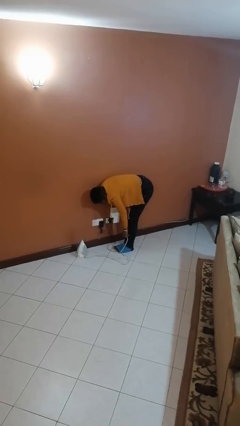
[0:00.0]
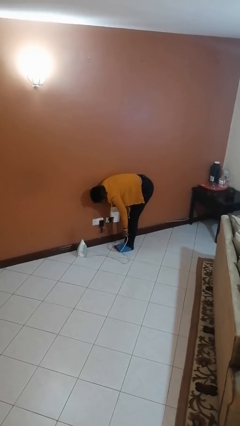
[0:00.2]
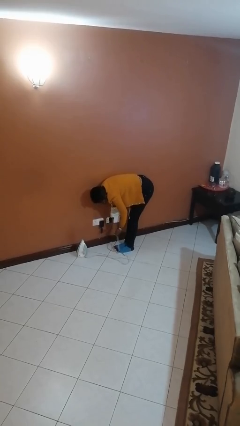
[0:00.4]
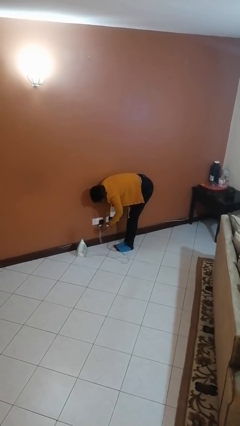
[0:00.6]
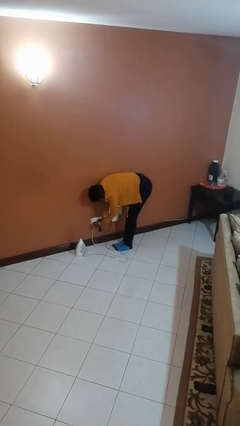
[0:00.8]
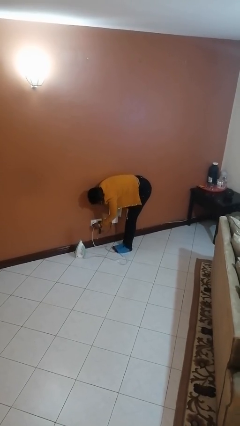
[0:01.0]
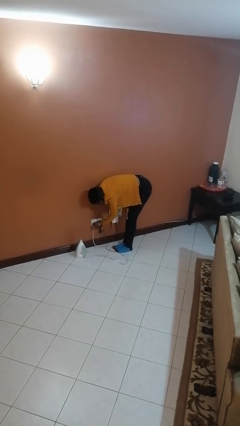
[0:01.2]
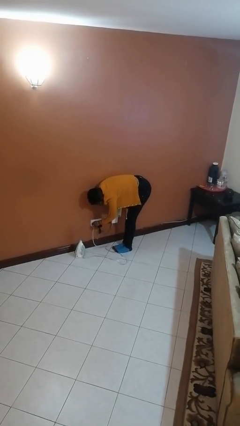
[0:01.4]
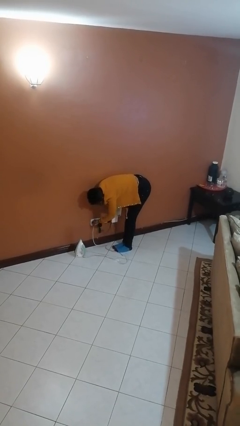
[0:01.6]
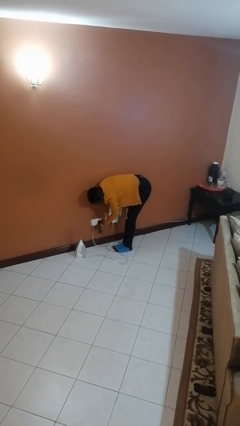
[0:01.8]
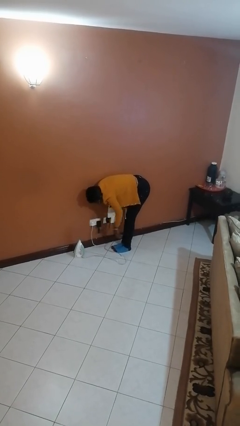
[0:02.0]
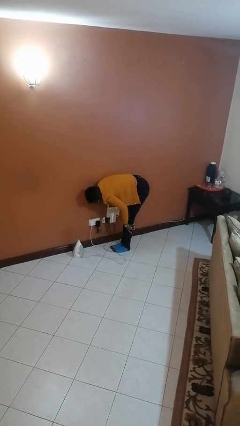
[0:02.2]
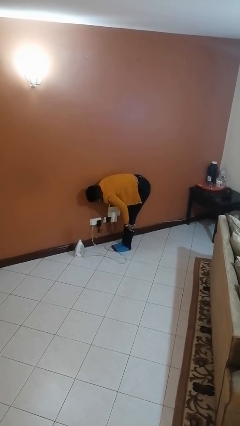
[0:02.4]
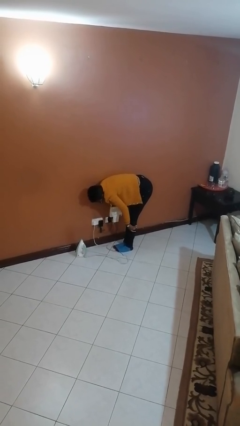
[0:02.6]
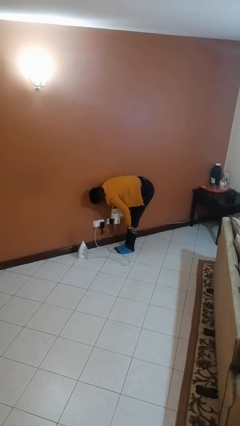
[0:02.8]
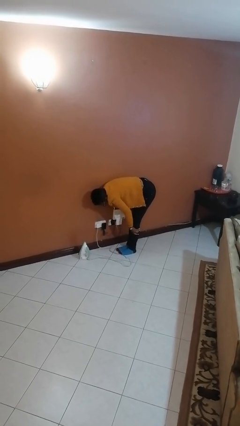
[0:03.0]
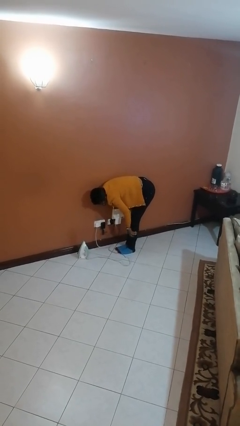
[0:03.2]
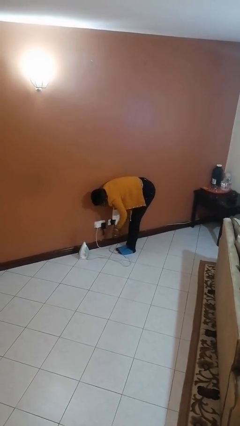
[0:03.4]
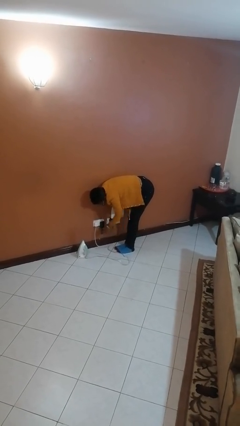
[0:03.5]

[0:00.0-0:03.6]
person plugs into electrical socket

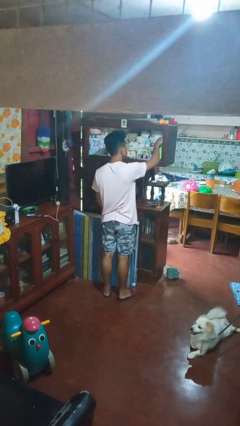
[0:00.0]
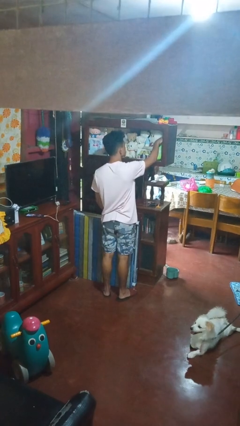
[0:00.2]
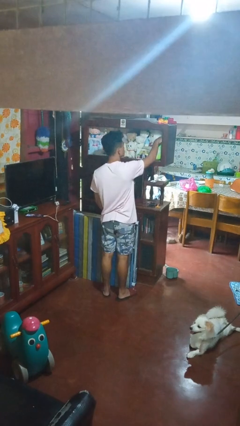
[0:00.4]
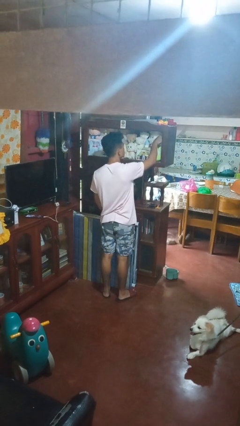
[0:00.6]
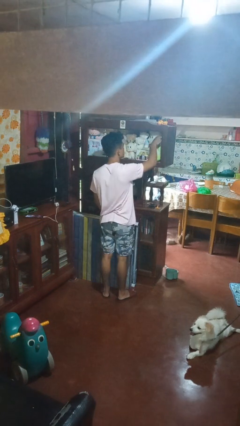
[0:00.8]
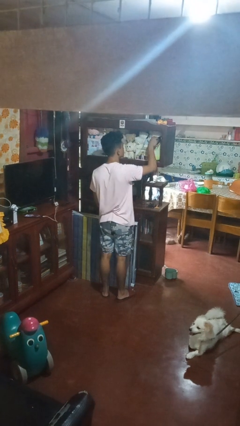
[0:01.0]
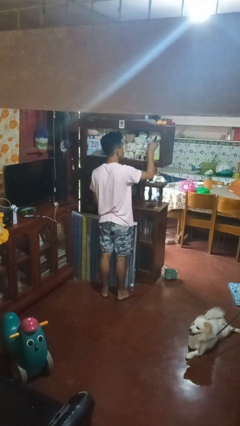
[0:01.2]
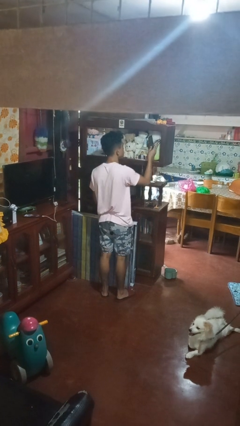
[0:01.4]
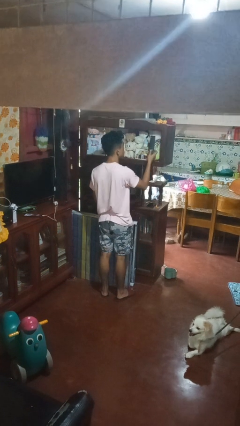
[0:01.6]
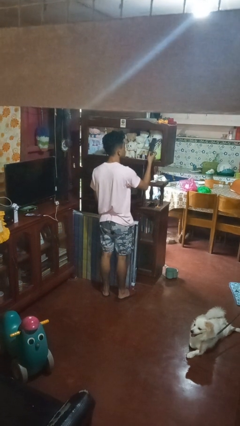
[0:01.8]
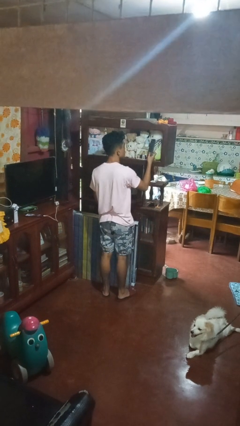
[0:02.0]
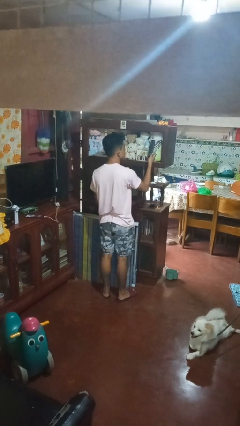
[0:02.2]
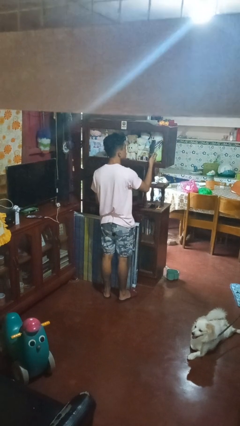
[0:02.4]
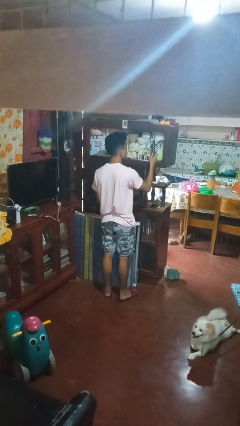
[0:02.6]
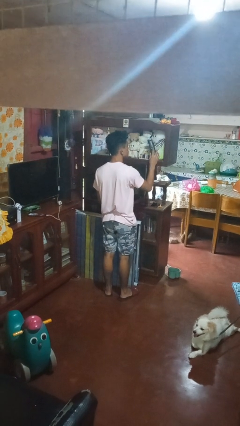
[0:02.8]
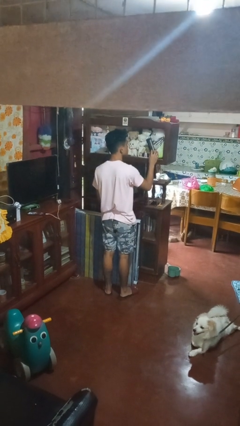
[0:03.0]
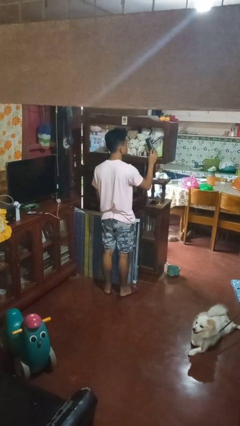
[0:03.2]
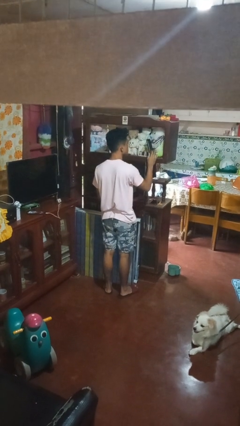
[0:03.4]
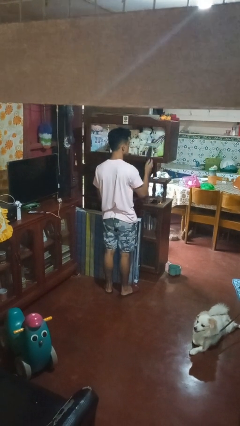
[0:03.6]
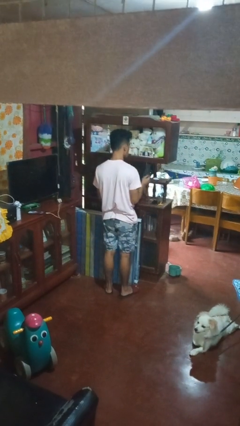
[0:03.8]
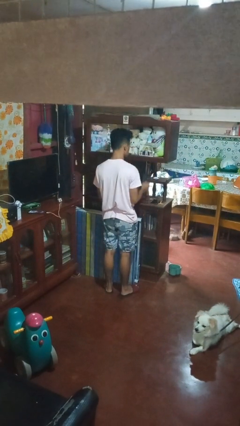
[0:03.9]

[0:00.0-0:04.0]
person picks up object from shelf

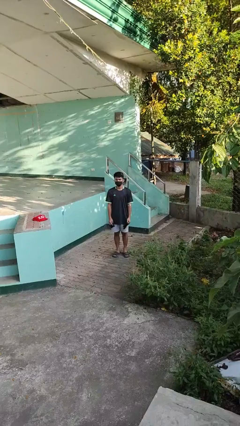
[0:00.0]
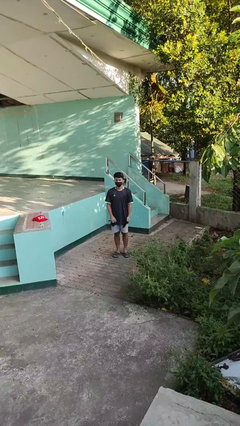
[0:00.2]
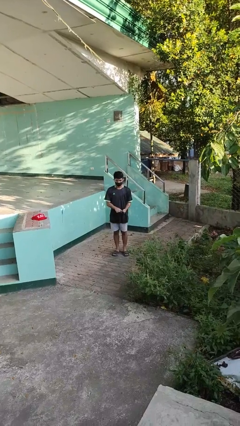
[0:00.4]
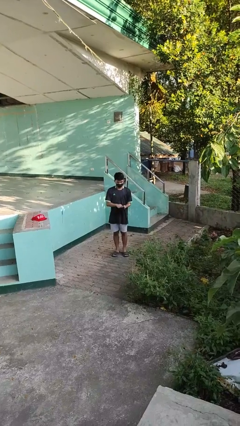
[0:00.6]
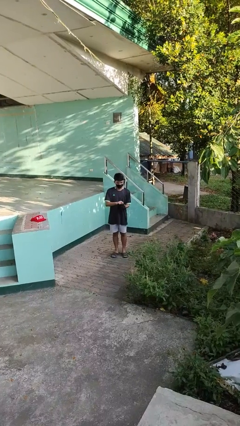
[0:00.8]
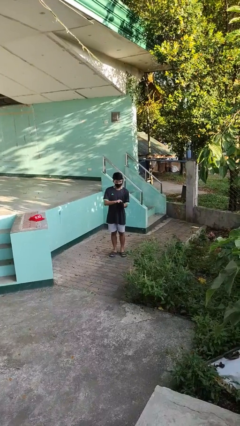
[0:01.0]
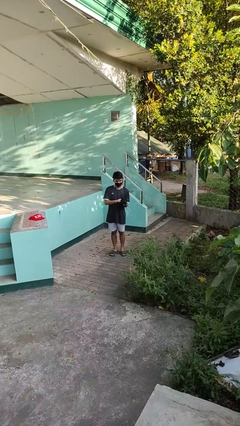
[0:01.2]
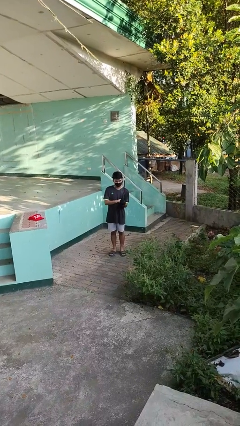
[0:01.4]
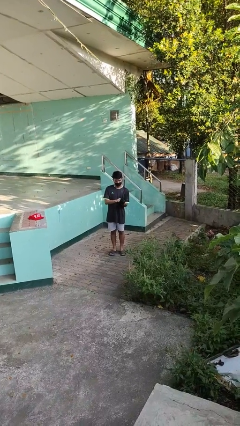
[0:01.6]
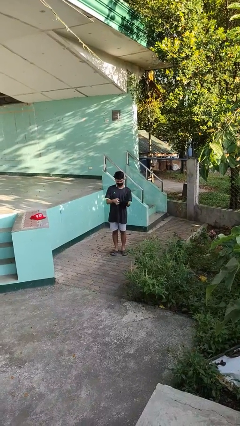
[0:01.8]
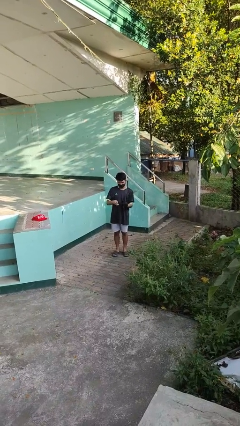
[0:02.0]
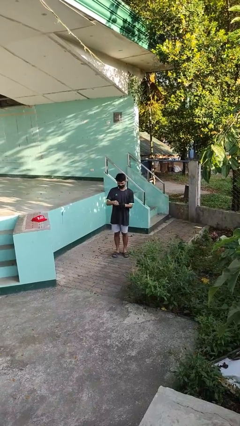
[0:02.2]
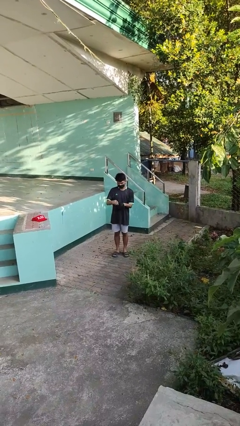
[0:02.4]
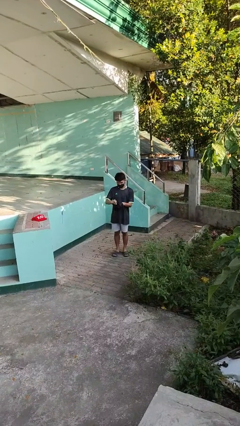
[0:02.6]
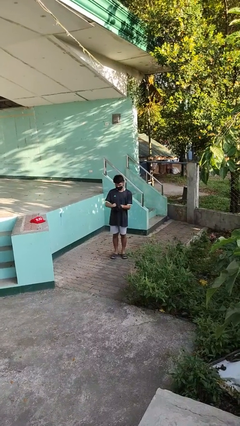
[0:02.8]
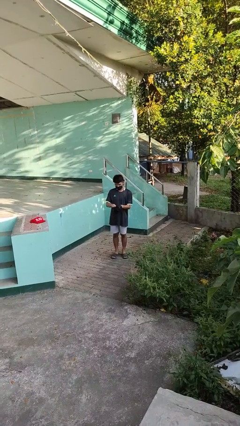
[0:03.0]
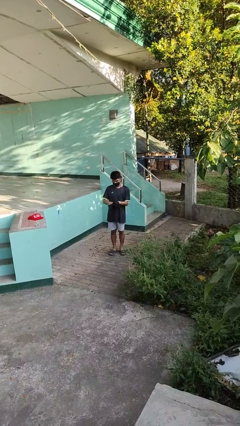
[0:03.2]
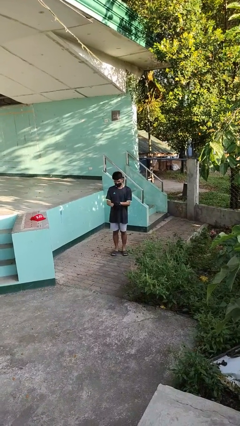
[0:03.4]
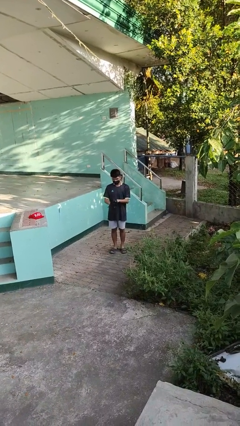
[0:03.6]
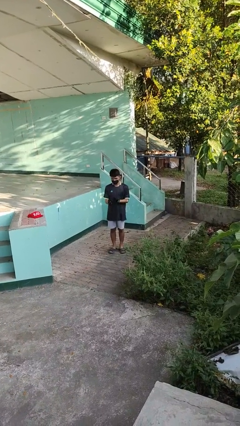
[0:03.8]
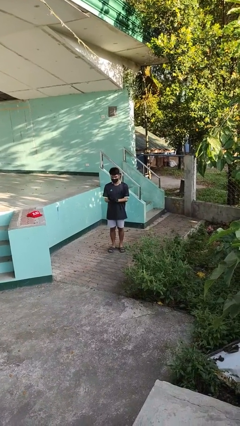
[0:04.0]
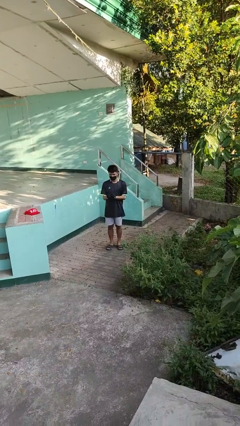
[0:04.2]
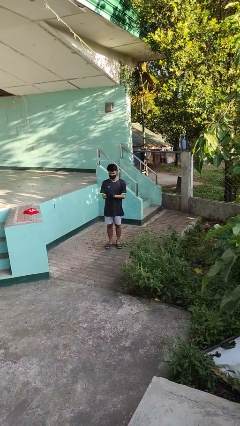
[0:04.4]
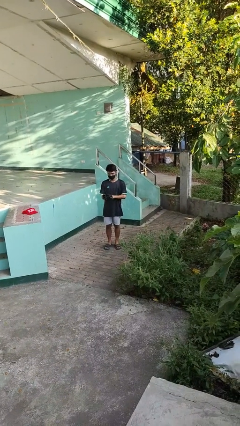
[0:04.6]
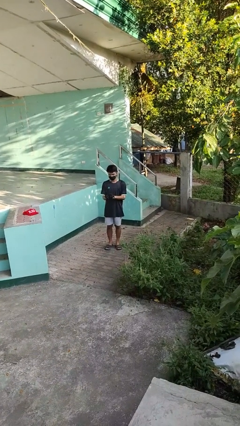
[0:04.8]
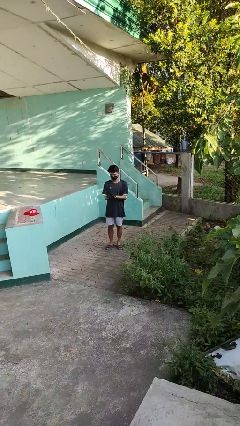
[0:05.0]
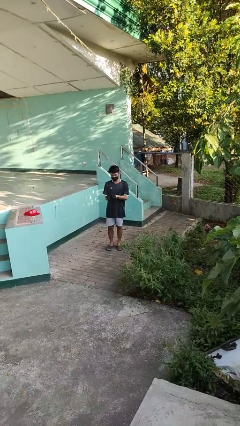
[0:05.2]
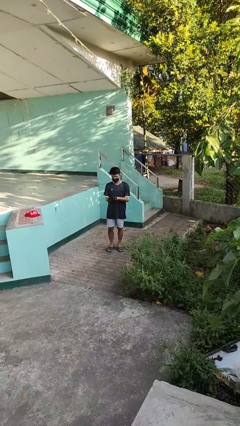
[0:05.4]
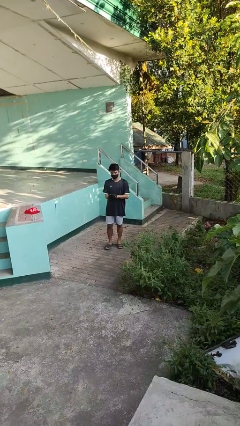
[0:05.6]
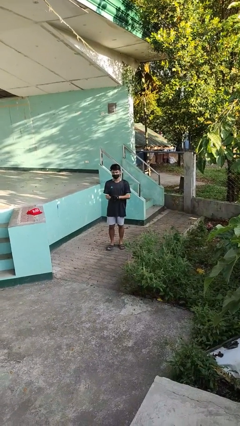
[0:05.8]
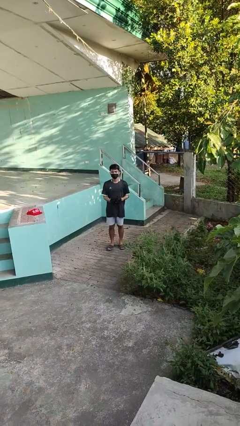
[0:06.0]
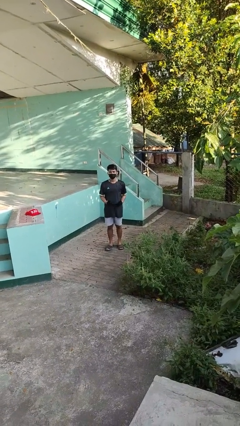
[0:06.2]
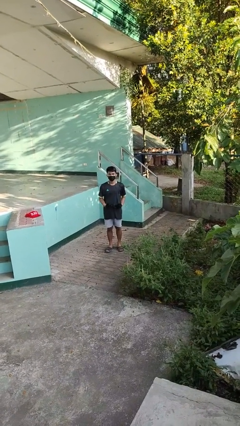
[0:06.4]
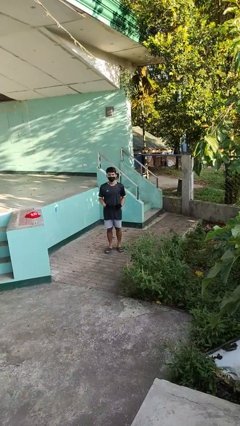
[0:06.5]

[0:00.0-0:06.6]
person puts on gloves

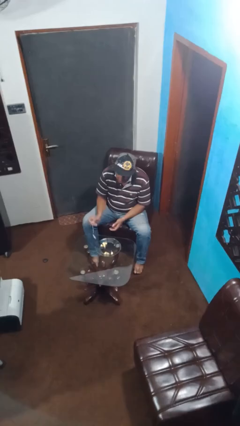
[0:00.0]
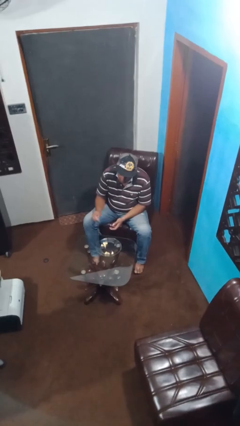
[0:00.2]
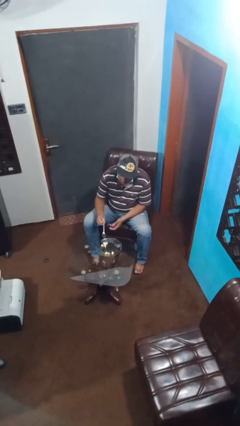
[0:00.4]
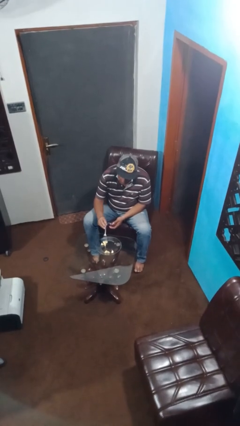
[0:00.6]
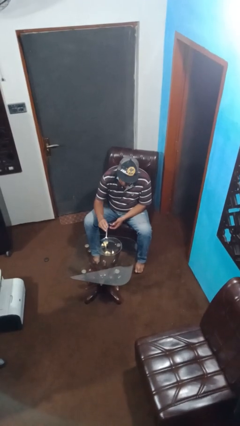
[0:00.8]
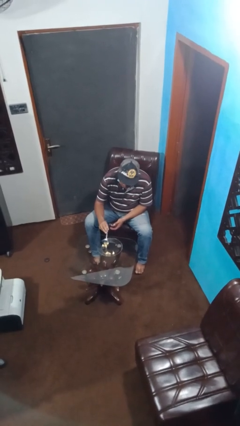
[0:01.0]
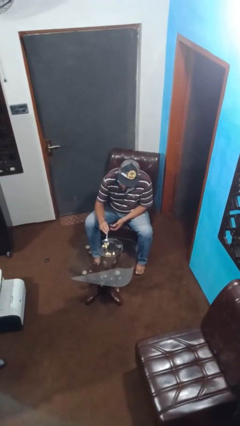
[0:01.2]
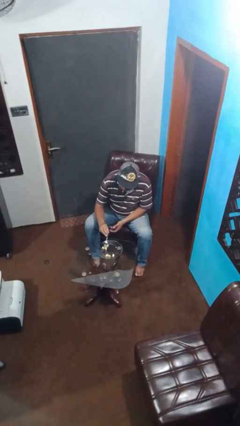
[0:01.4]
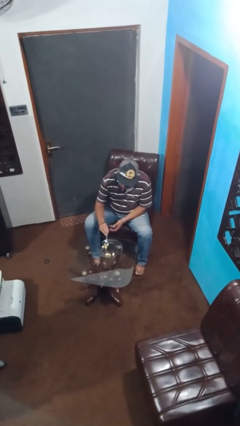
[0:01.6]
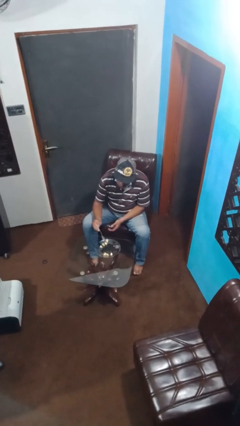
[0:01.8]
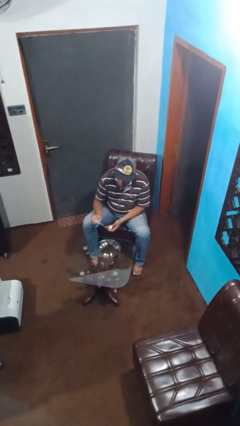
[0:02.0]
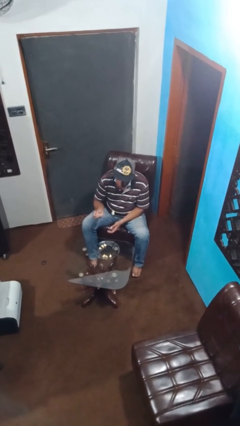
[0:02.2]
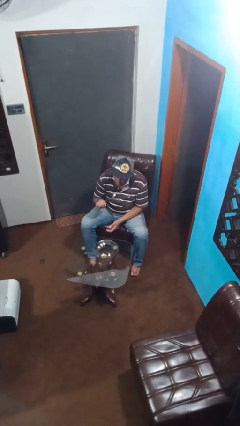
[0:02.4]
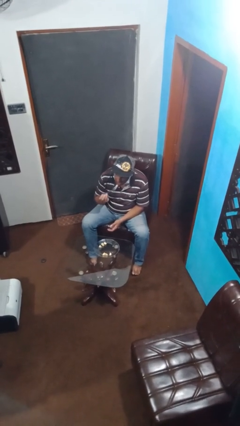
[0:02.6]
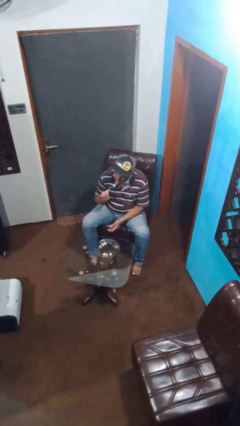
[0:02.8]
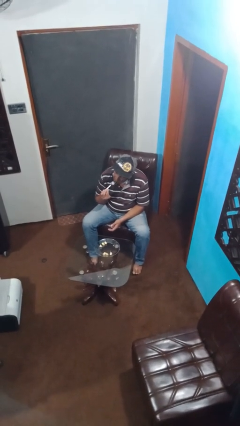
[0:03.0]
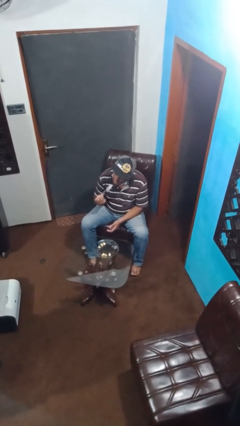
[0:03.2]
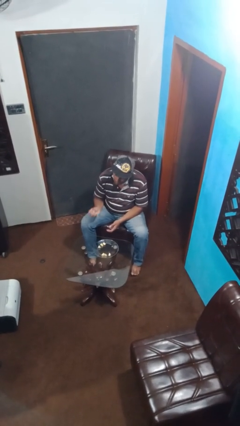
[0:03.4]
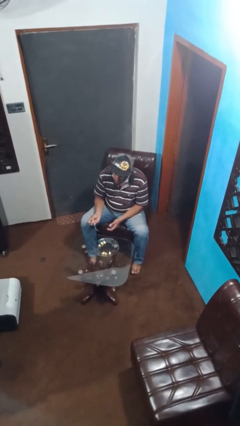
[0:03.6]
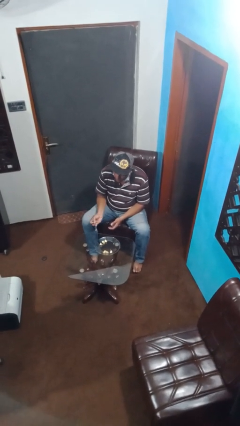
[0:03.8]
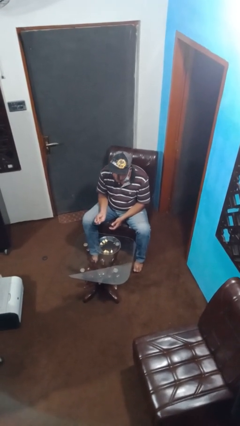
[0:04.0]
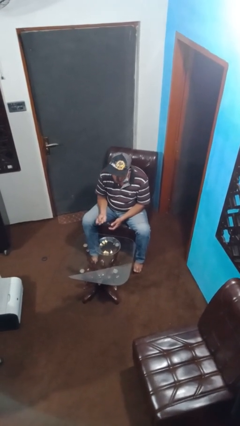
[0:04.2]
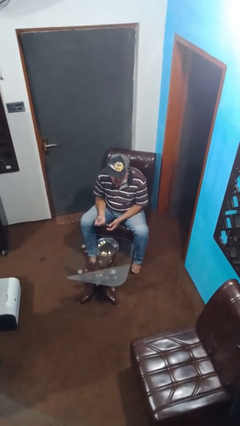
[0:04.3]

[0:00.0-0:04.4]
person eats with utensil
